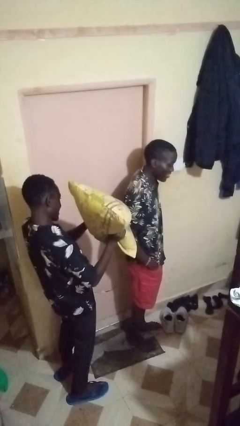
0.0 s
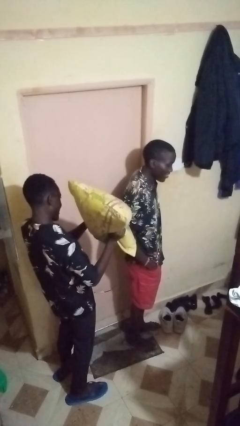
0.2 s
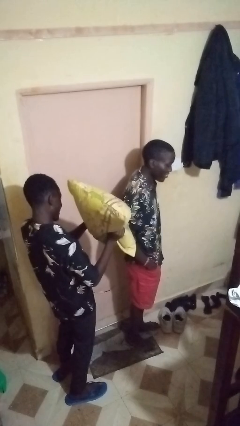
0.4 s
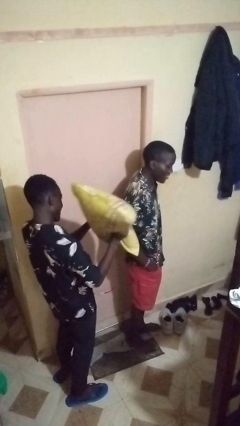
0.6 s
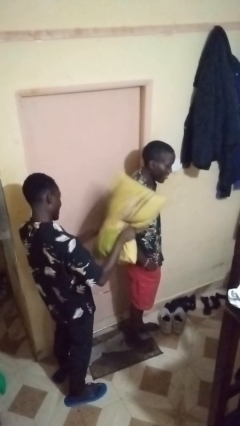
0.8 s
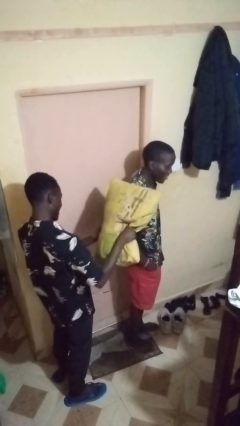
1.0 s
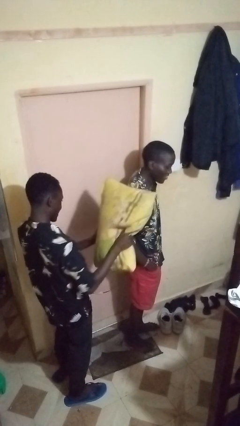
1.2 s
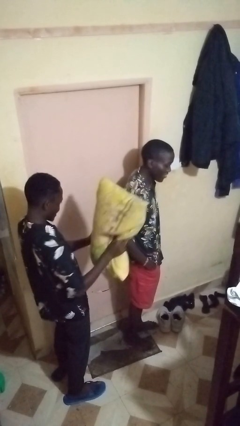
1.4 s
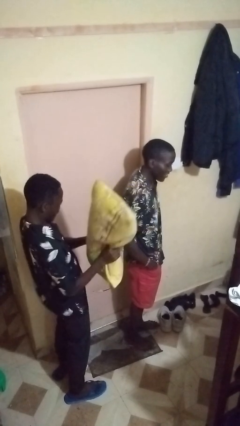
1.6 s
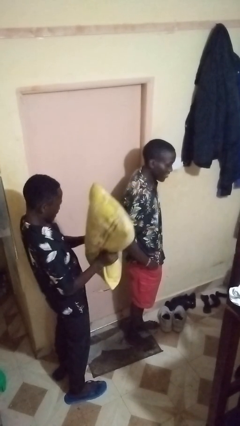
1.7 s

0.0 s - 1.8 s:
person hits person with pillow

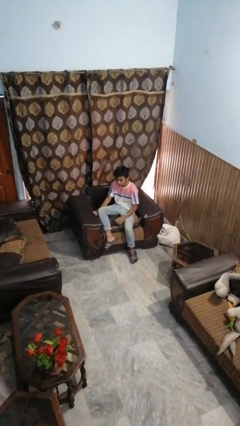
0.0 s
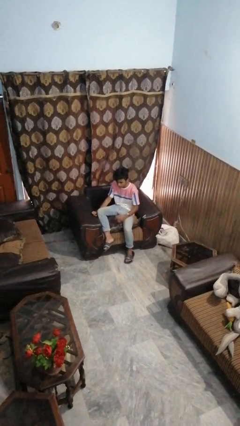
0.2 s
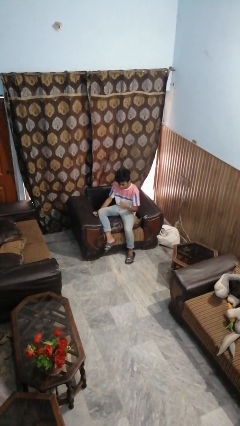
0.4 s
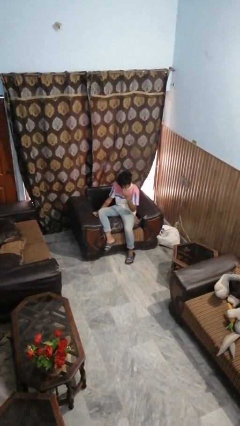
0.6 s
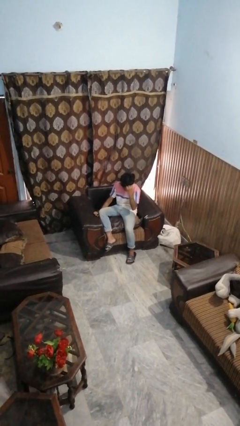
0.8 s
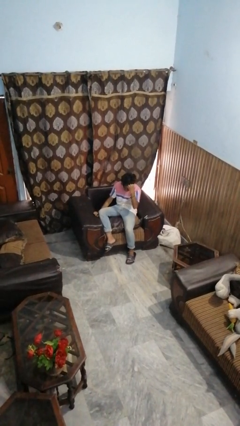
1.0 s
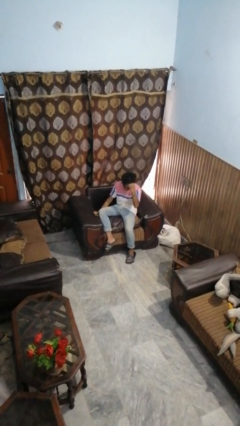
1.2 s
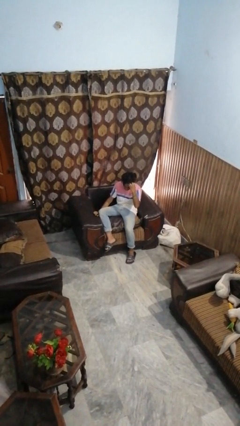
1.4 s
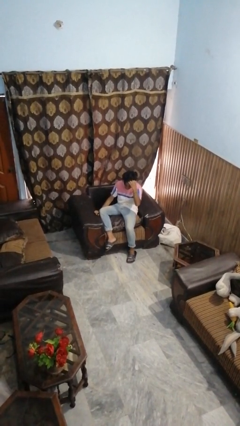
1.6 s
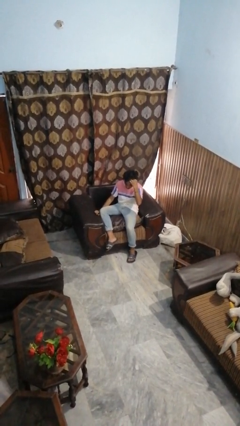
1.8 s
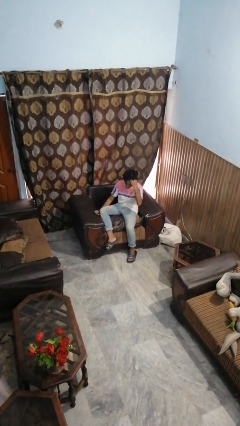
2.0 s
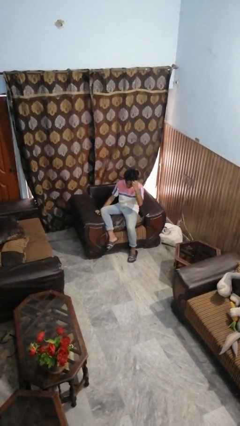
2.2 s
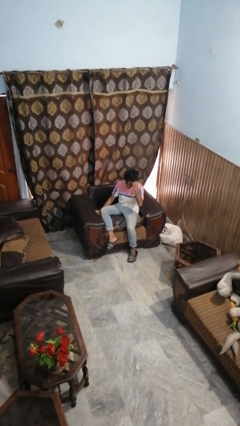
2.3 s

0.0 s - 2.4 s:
person strokes hair

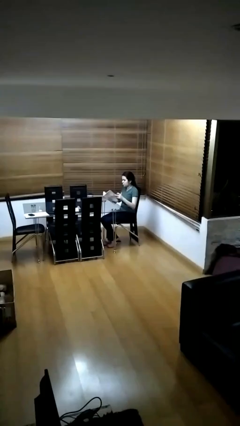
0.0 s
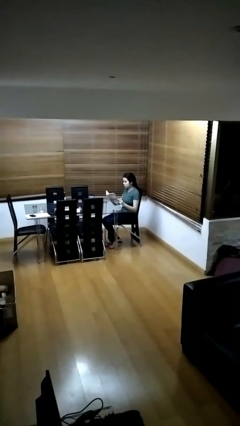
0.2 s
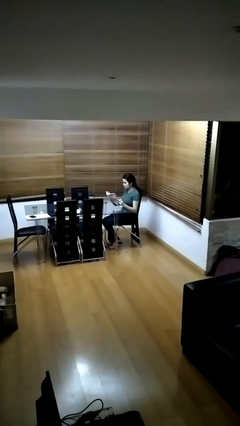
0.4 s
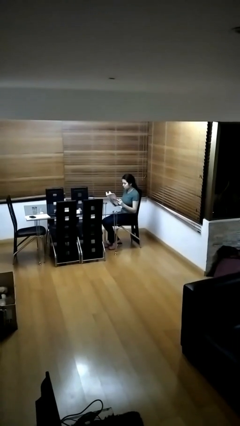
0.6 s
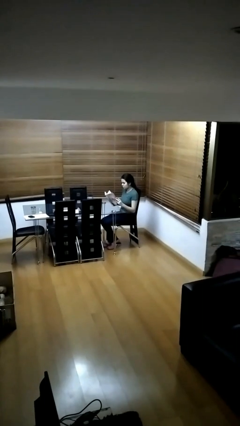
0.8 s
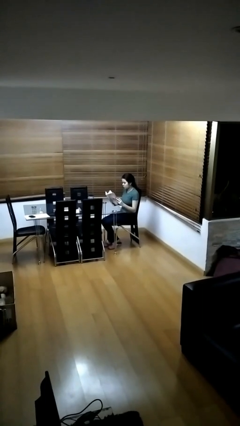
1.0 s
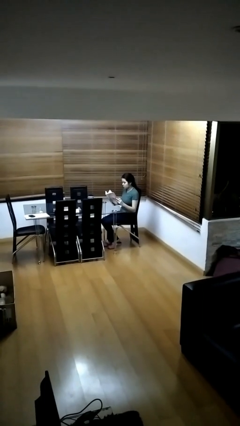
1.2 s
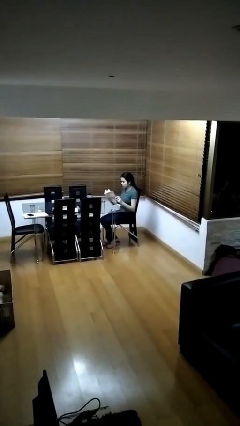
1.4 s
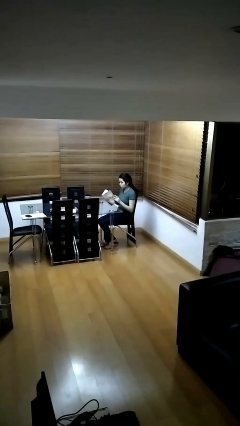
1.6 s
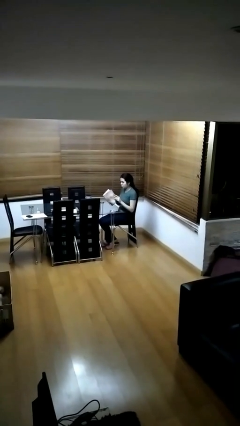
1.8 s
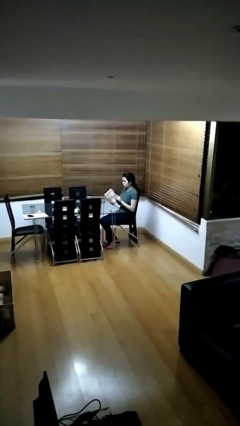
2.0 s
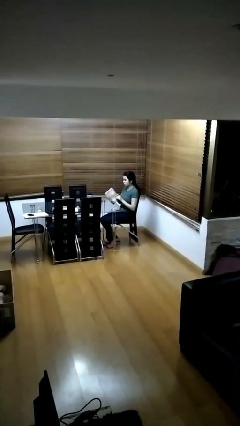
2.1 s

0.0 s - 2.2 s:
person reads document

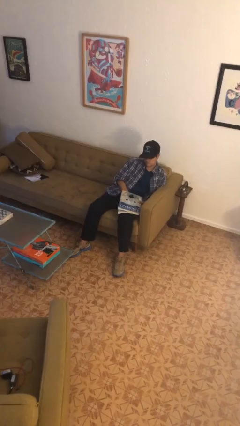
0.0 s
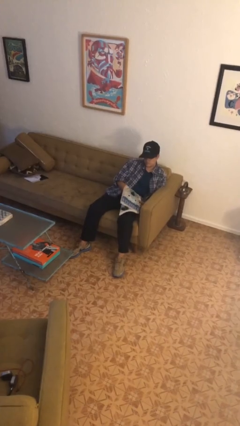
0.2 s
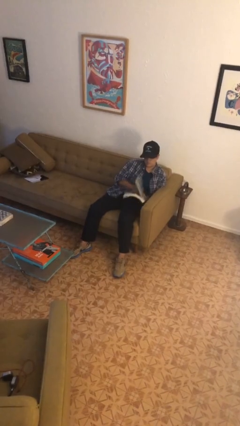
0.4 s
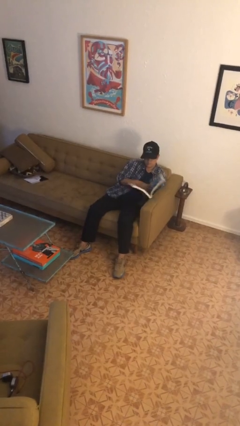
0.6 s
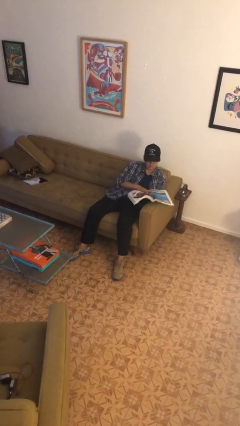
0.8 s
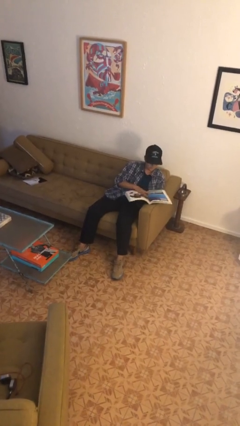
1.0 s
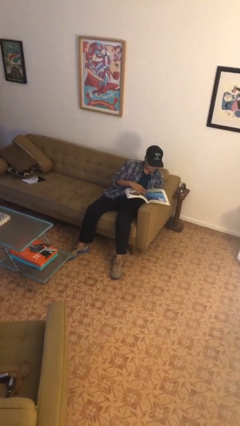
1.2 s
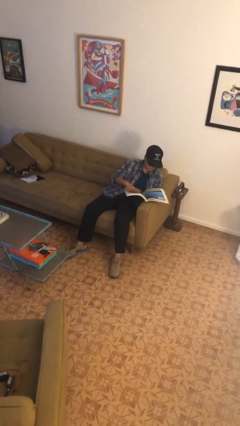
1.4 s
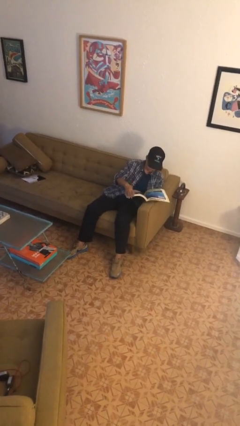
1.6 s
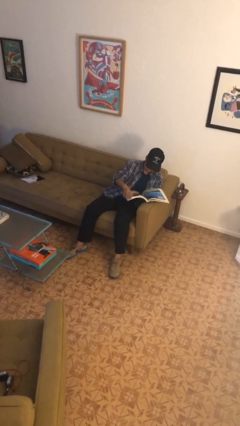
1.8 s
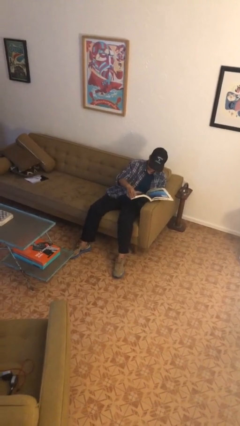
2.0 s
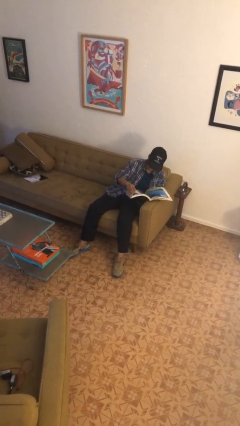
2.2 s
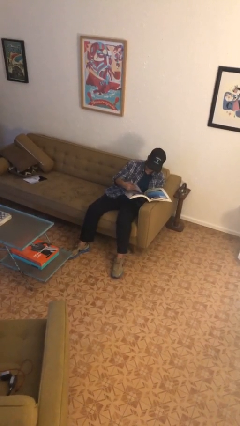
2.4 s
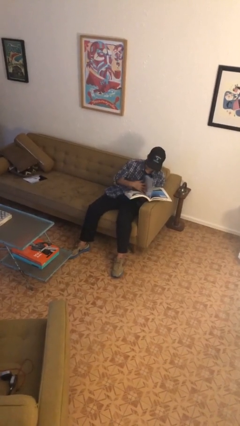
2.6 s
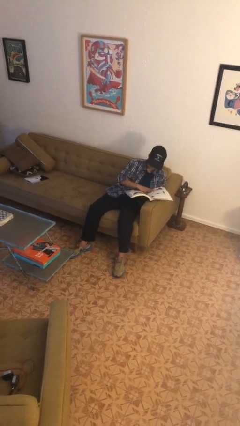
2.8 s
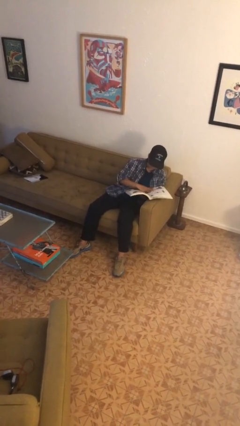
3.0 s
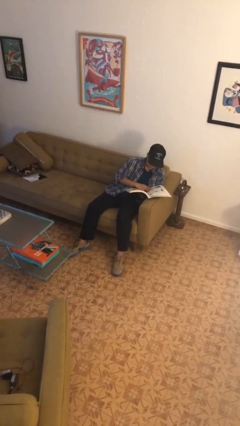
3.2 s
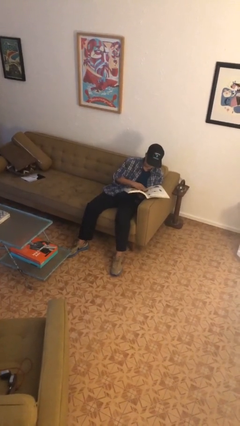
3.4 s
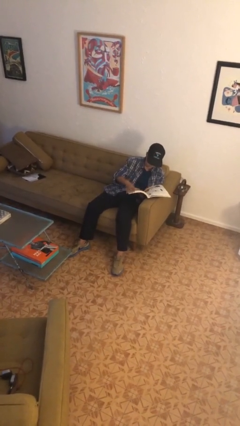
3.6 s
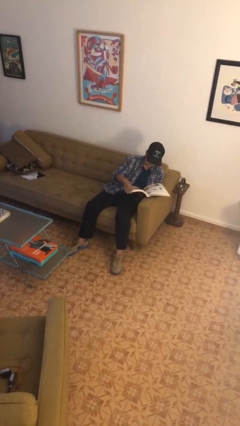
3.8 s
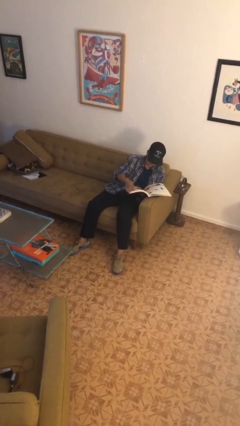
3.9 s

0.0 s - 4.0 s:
person reads book

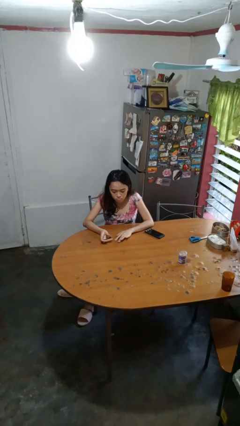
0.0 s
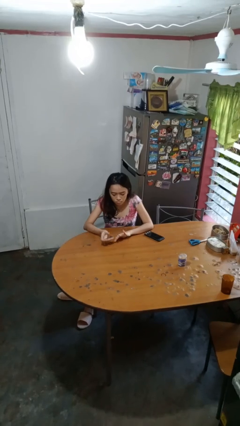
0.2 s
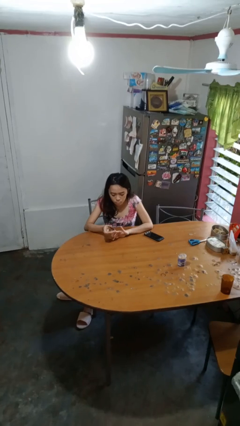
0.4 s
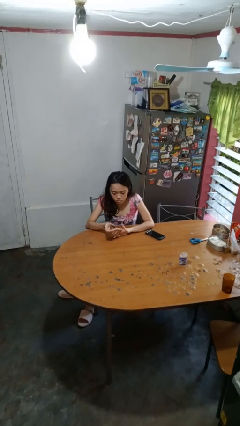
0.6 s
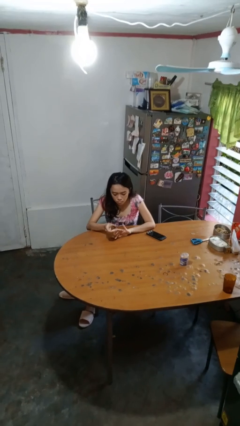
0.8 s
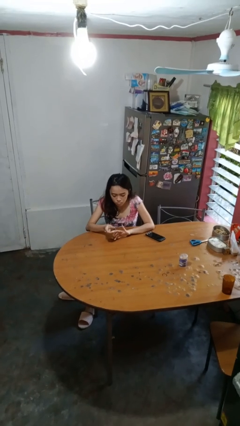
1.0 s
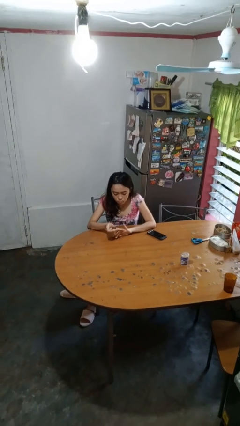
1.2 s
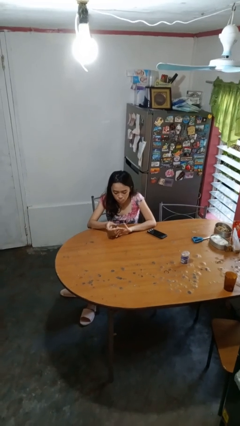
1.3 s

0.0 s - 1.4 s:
person clips fingernails

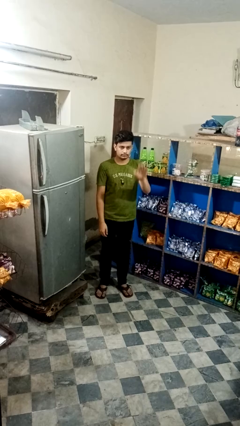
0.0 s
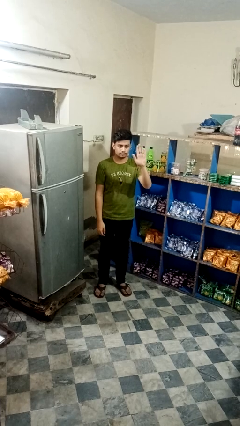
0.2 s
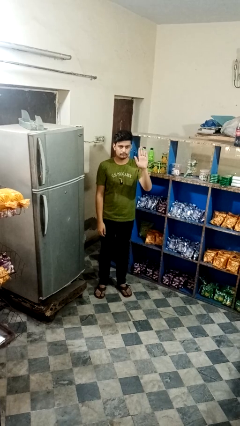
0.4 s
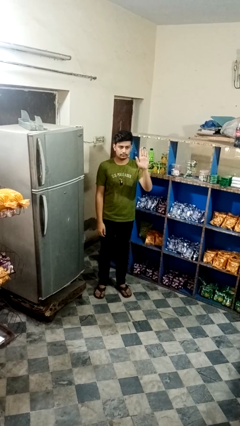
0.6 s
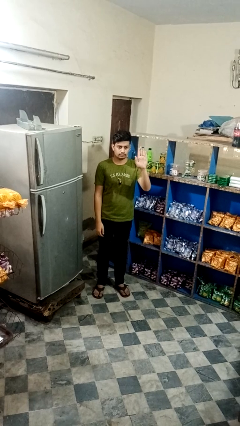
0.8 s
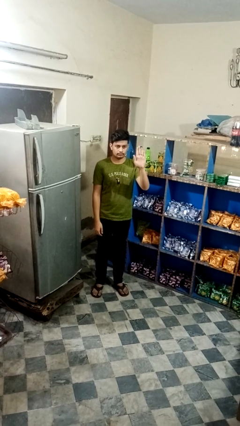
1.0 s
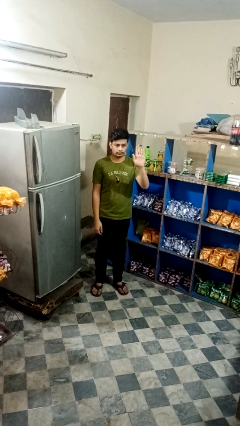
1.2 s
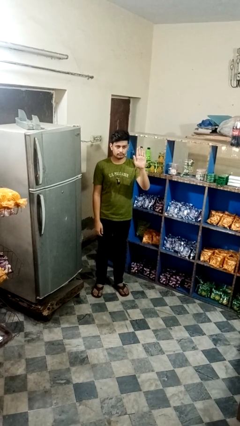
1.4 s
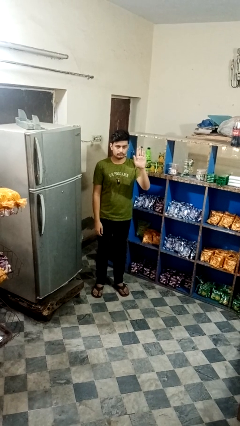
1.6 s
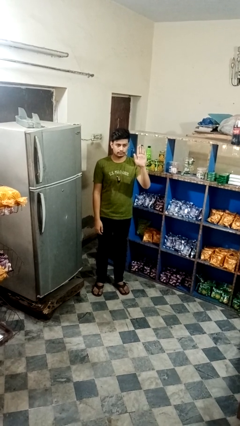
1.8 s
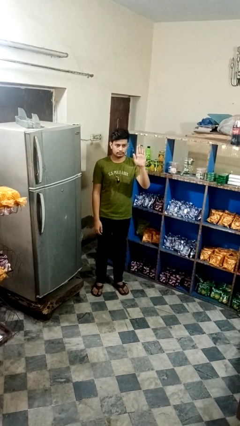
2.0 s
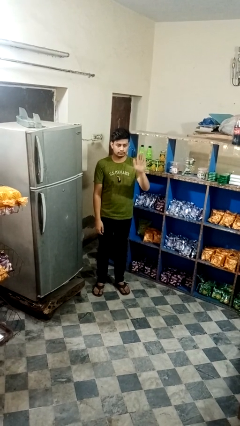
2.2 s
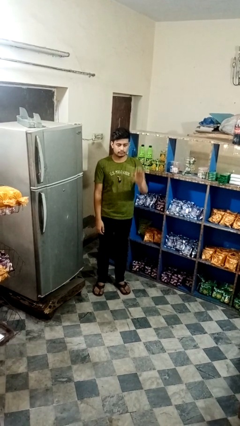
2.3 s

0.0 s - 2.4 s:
person gestures stop

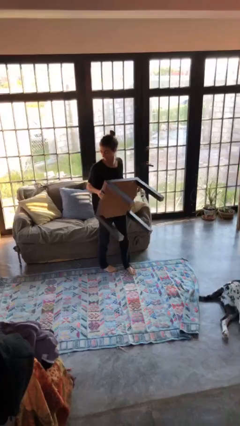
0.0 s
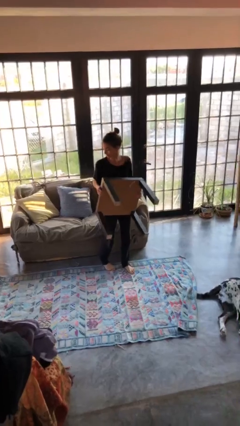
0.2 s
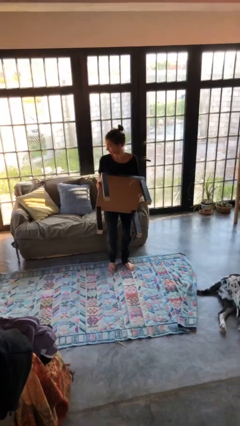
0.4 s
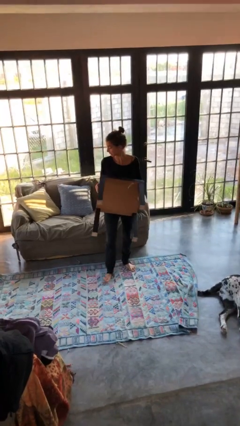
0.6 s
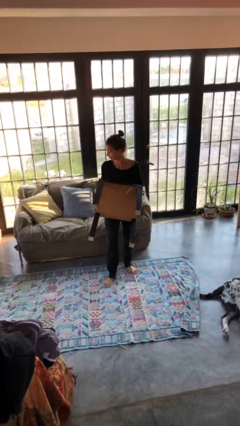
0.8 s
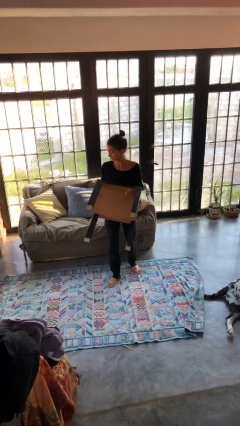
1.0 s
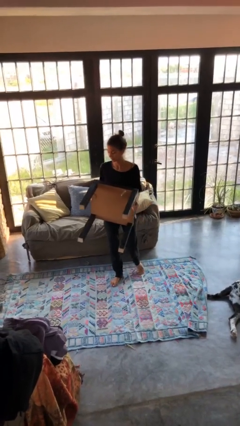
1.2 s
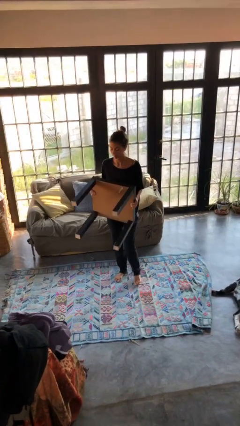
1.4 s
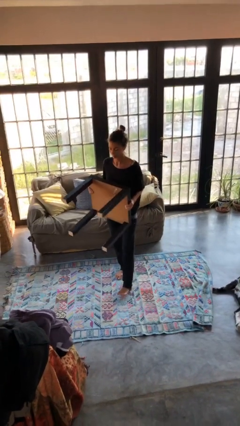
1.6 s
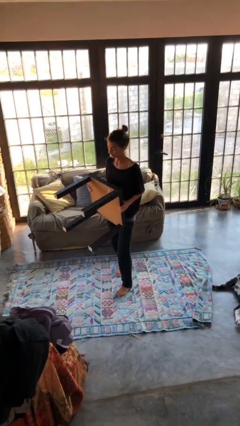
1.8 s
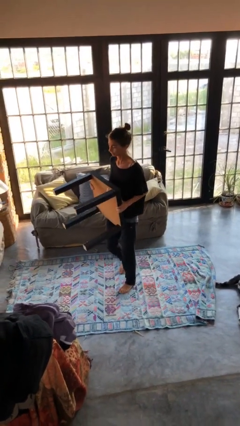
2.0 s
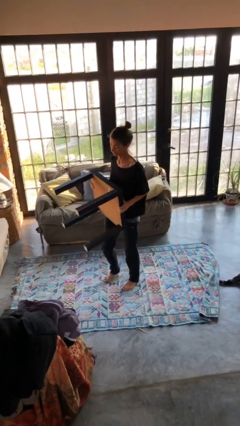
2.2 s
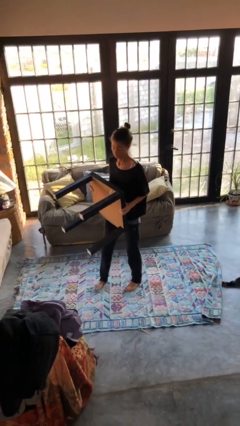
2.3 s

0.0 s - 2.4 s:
person carries furniture

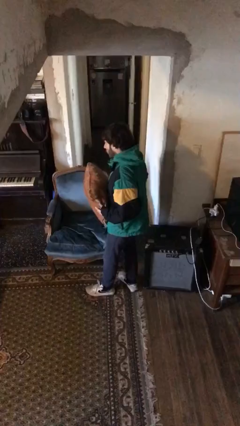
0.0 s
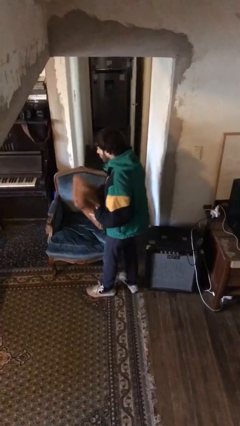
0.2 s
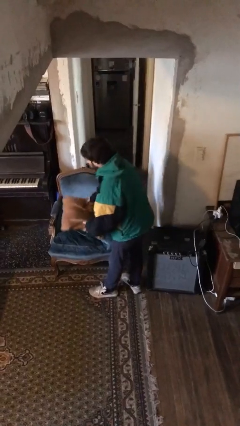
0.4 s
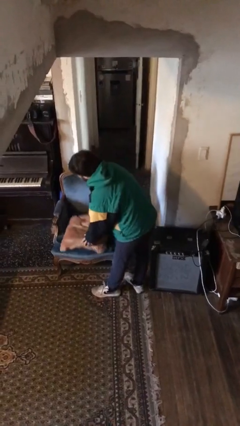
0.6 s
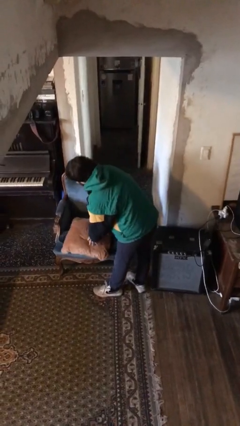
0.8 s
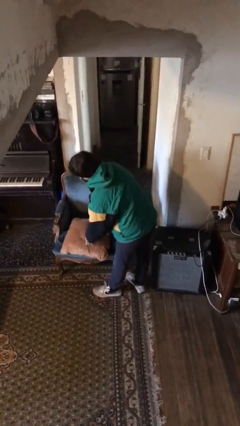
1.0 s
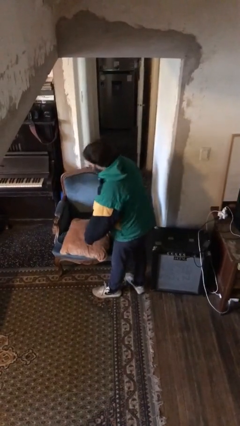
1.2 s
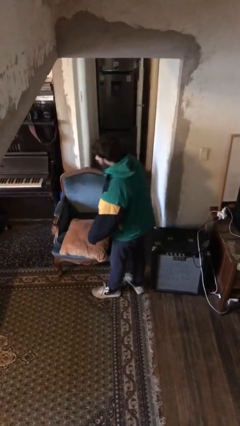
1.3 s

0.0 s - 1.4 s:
person puts down object on couch
